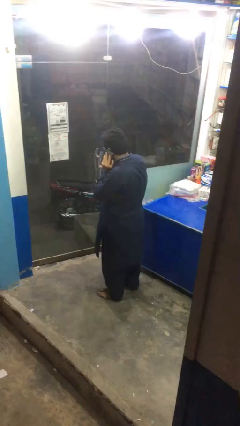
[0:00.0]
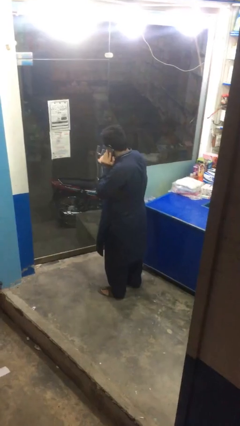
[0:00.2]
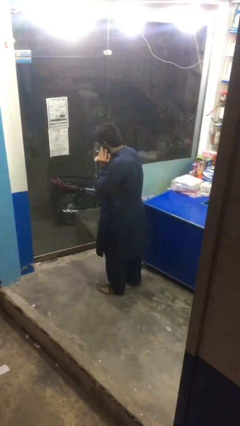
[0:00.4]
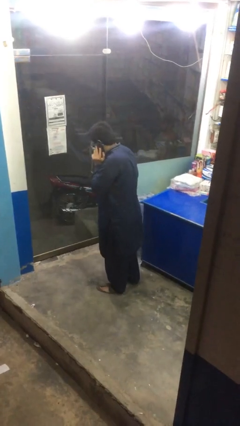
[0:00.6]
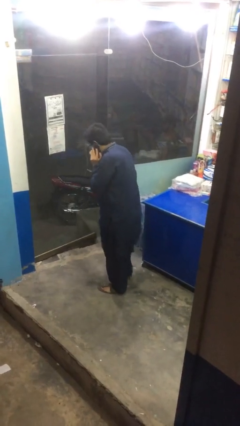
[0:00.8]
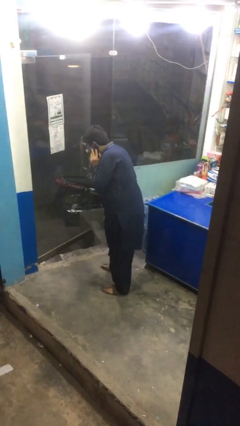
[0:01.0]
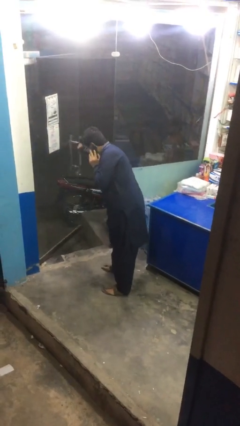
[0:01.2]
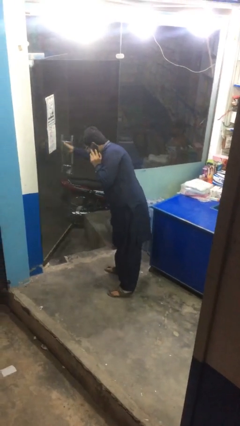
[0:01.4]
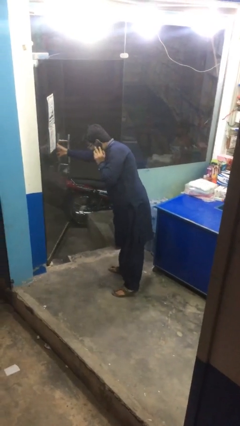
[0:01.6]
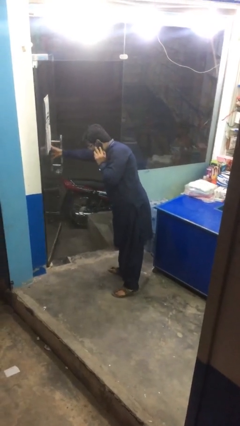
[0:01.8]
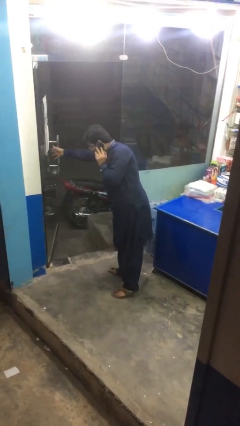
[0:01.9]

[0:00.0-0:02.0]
person opens facility door

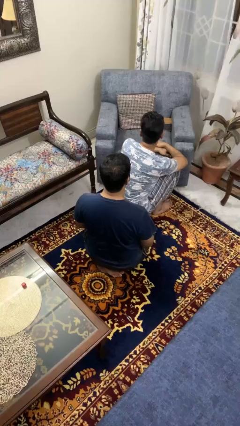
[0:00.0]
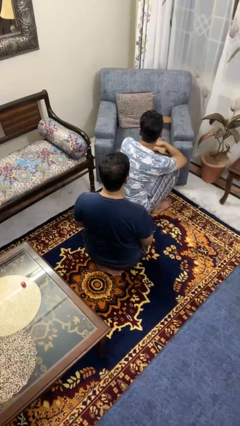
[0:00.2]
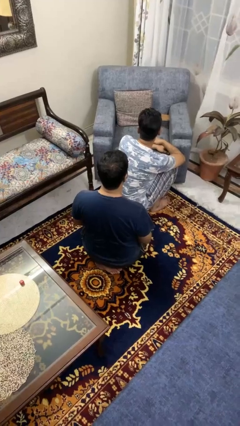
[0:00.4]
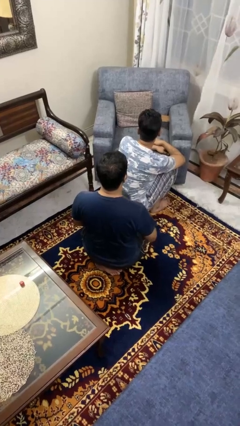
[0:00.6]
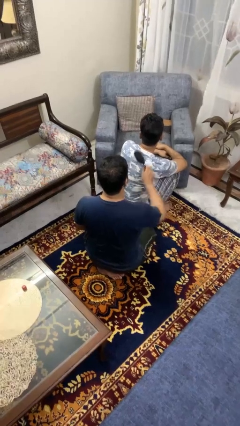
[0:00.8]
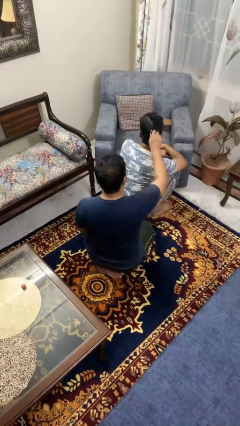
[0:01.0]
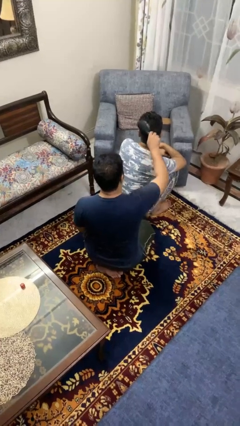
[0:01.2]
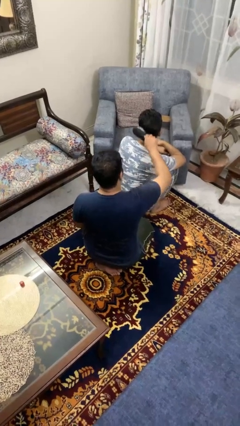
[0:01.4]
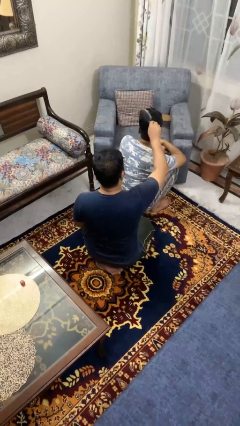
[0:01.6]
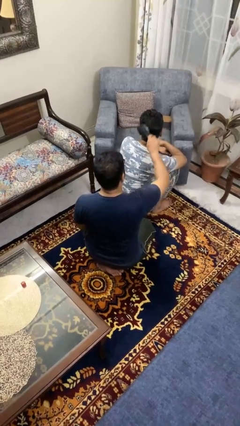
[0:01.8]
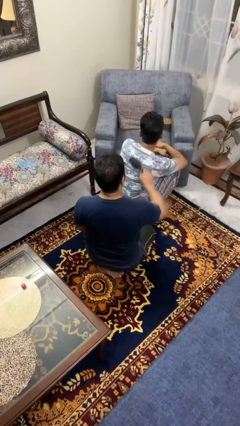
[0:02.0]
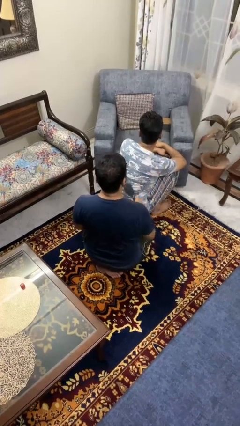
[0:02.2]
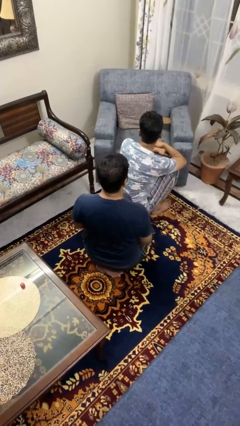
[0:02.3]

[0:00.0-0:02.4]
person brushes hair of person

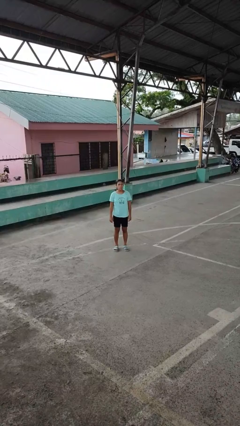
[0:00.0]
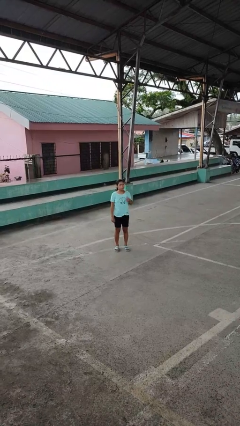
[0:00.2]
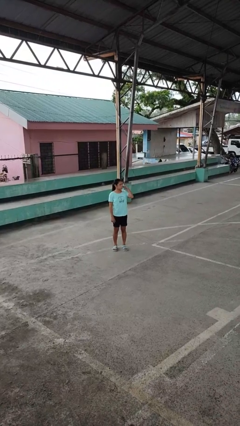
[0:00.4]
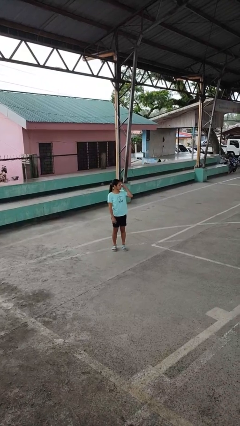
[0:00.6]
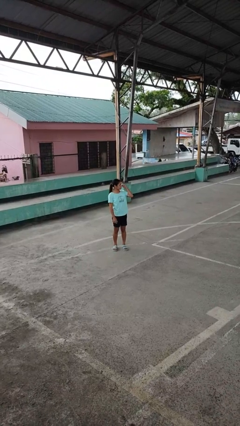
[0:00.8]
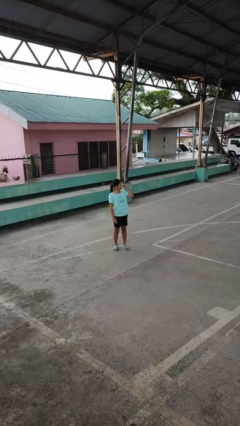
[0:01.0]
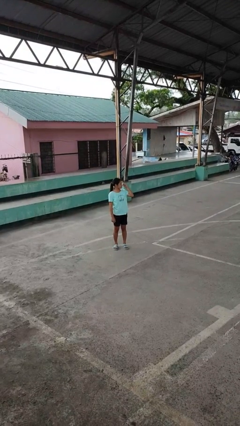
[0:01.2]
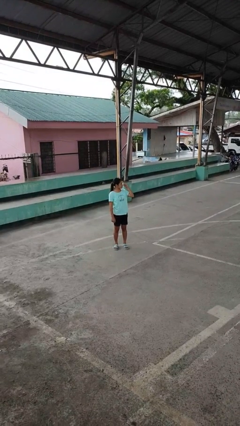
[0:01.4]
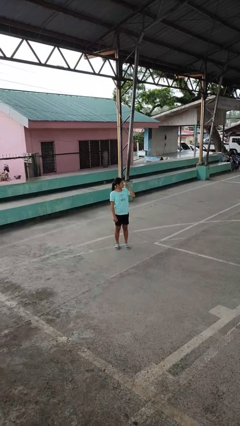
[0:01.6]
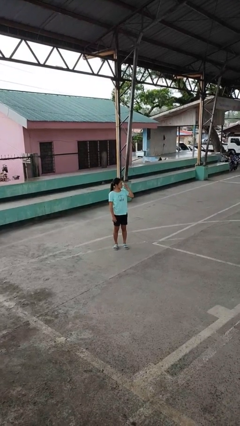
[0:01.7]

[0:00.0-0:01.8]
person gestures behind me

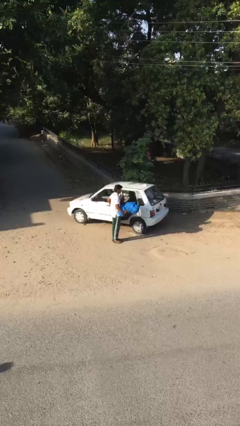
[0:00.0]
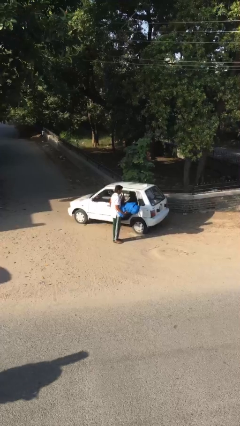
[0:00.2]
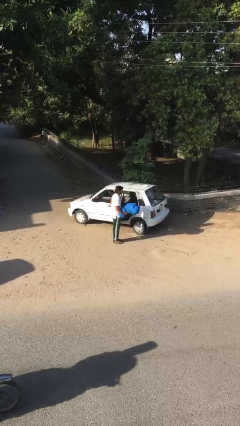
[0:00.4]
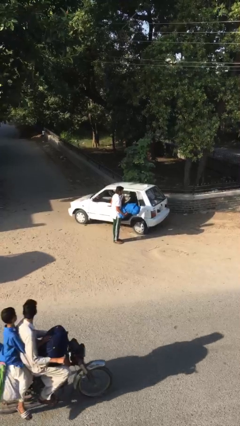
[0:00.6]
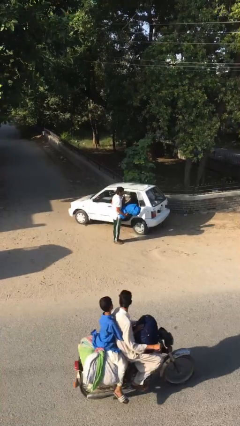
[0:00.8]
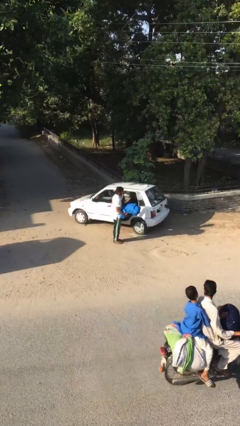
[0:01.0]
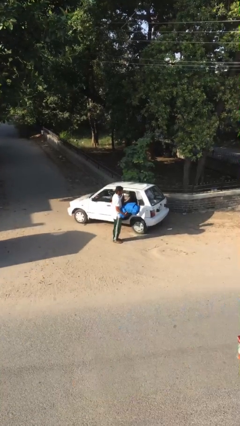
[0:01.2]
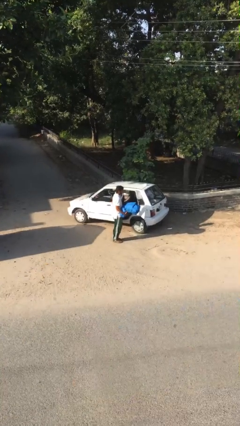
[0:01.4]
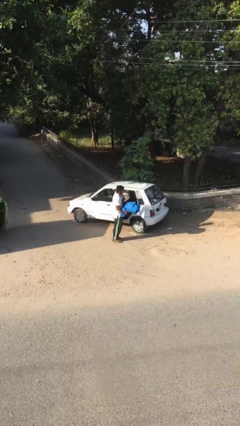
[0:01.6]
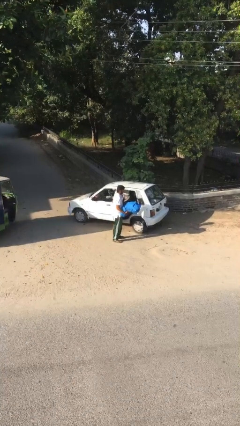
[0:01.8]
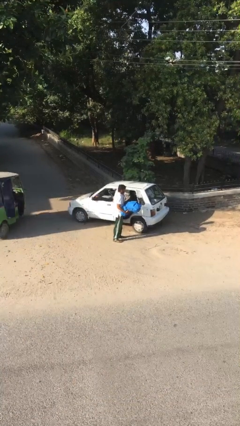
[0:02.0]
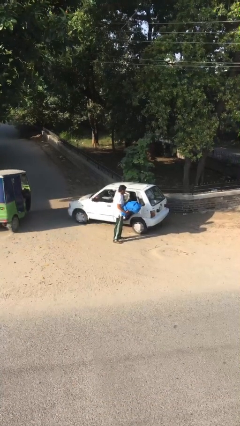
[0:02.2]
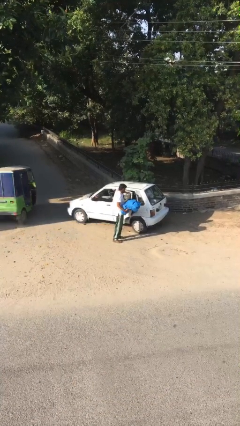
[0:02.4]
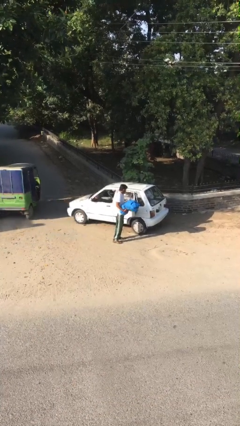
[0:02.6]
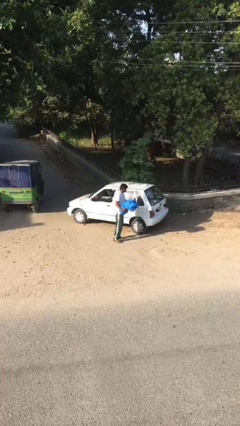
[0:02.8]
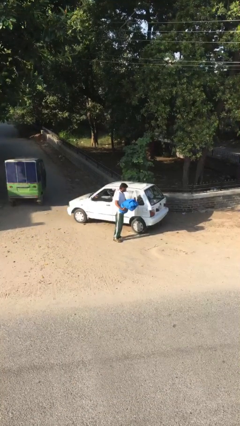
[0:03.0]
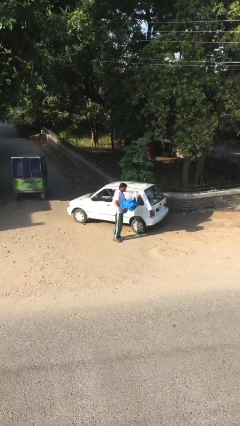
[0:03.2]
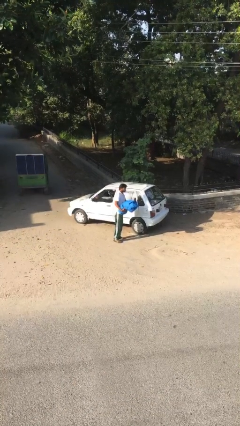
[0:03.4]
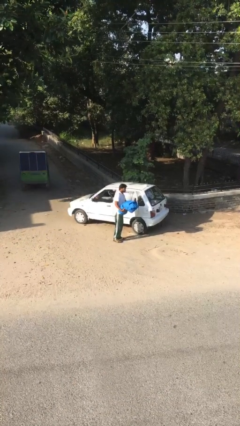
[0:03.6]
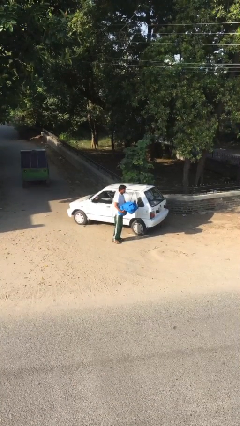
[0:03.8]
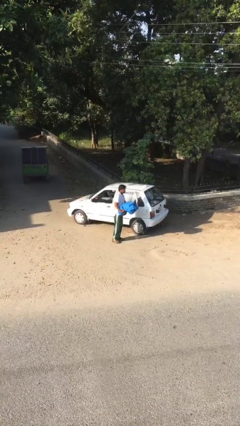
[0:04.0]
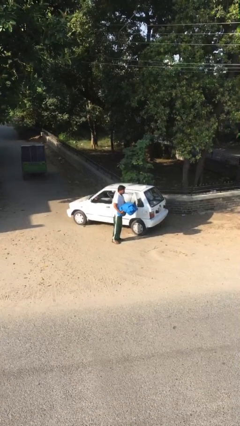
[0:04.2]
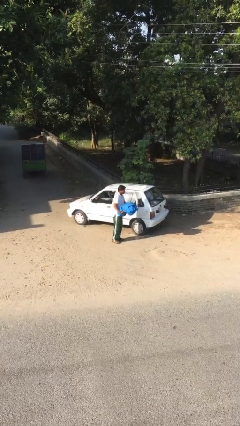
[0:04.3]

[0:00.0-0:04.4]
person closes car door

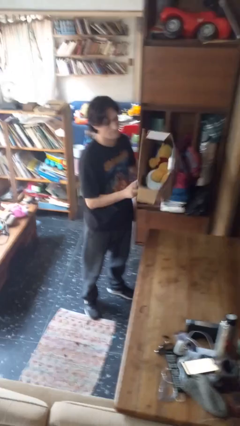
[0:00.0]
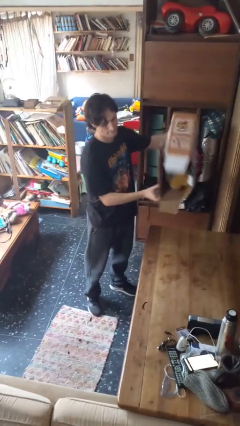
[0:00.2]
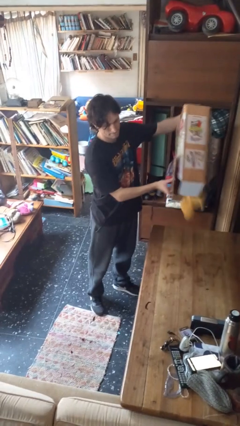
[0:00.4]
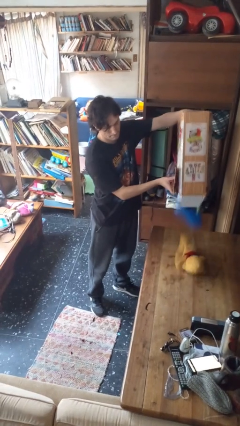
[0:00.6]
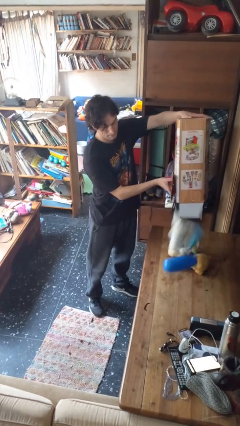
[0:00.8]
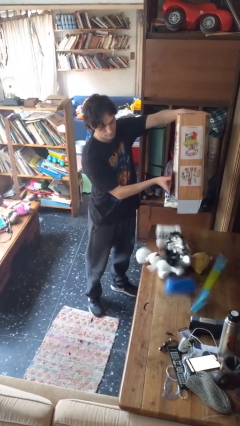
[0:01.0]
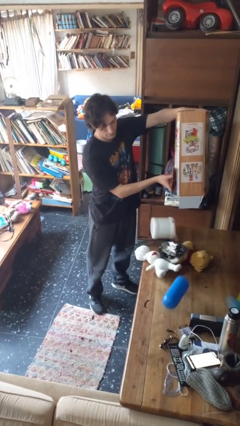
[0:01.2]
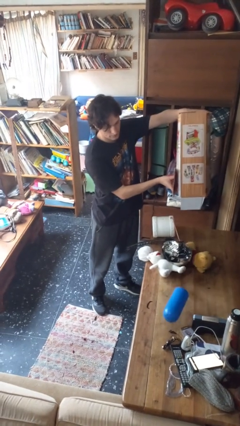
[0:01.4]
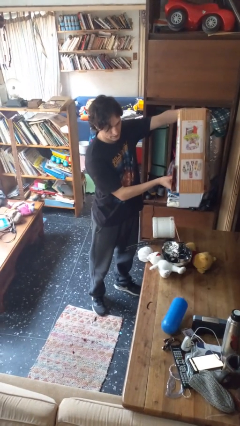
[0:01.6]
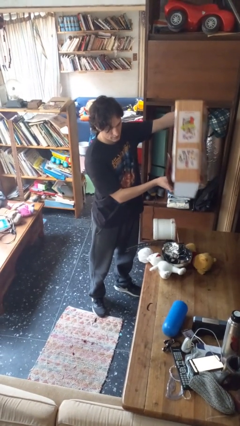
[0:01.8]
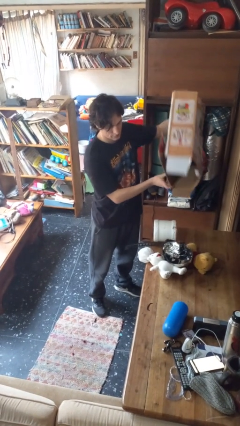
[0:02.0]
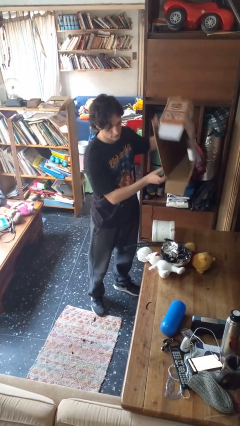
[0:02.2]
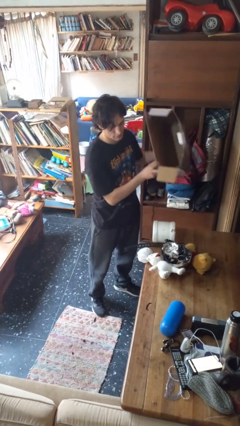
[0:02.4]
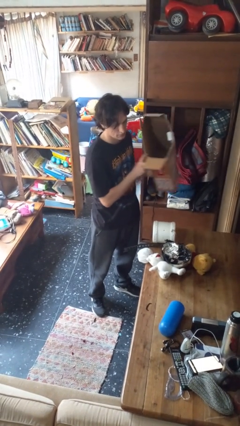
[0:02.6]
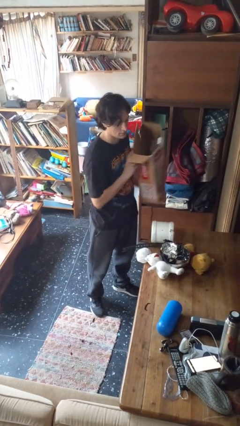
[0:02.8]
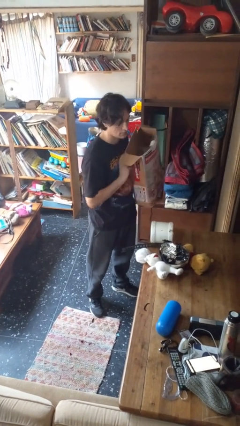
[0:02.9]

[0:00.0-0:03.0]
person unloads box onto table

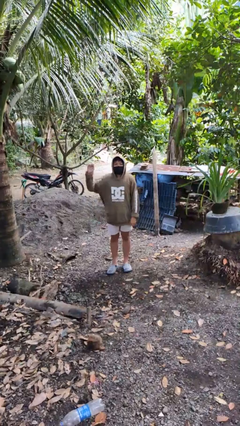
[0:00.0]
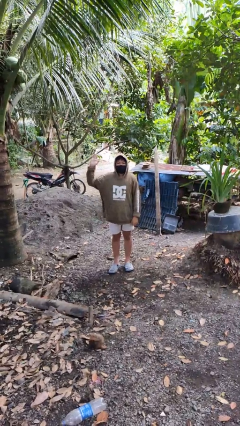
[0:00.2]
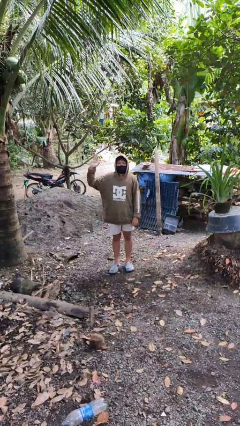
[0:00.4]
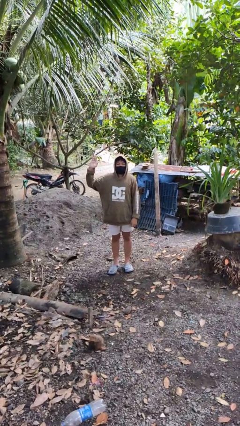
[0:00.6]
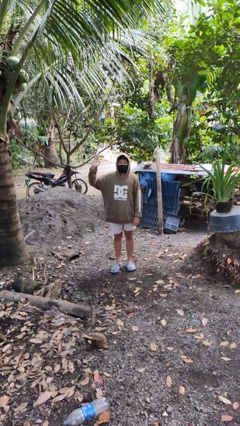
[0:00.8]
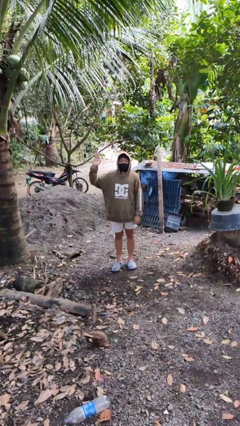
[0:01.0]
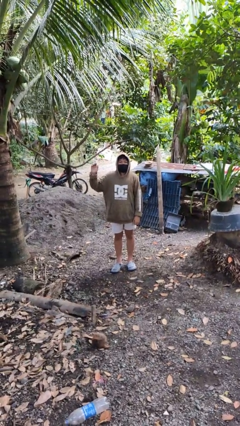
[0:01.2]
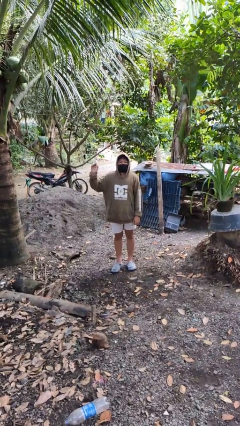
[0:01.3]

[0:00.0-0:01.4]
person gestures number five

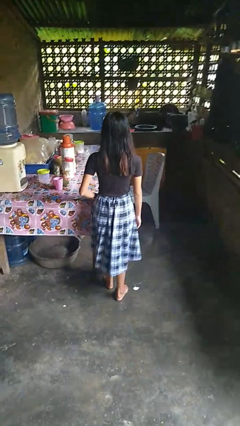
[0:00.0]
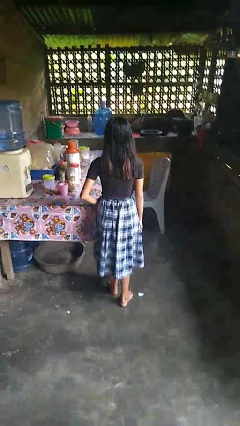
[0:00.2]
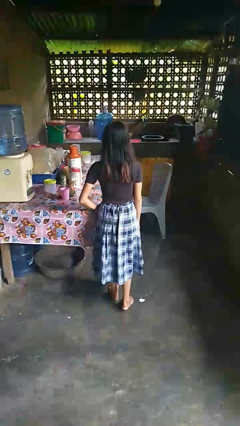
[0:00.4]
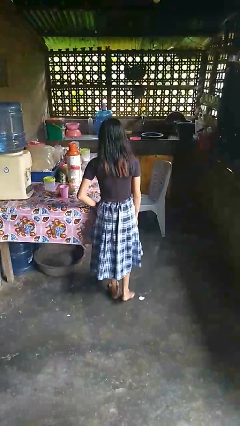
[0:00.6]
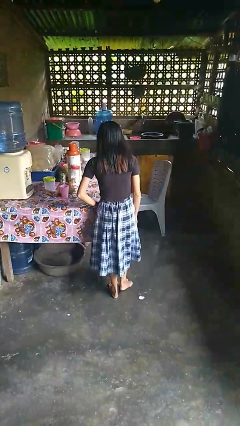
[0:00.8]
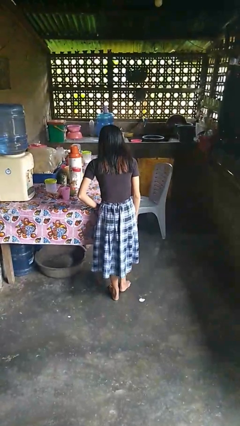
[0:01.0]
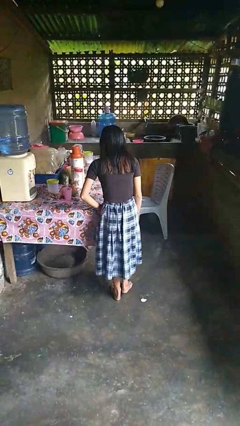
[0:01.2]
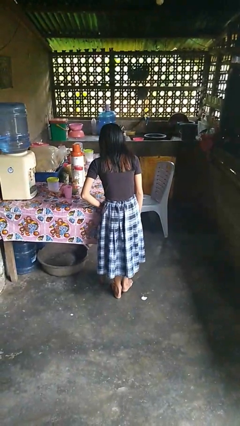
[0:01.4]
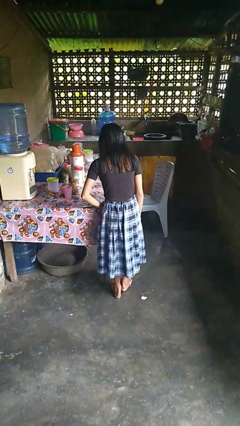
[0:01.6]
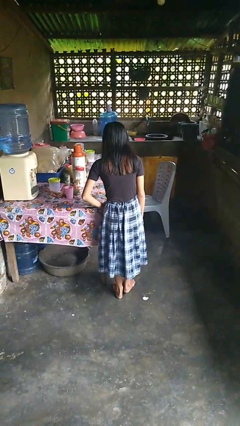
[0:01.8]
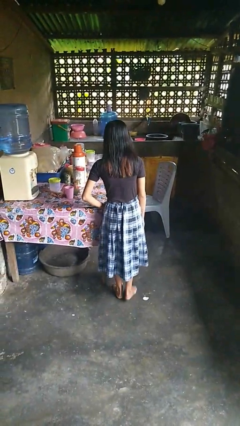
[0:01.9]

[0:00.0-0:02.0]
person bumps into table

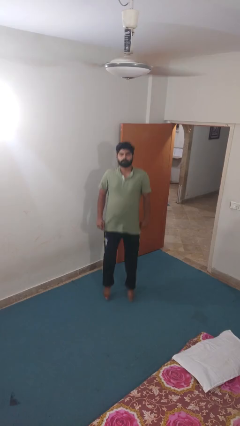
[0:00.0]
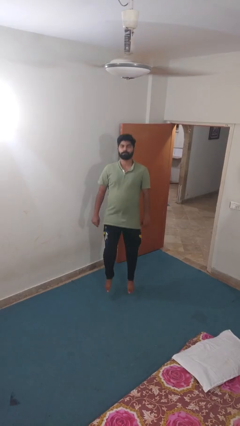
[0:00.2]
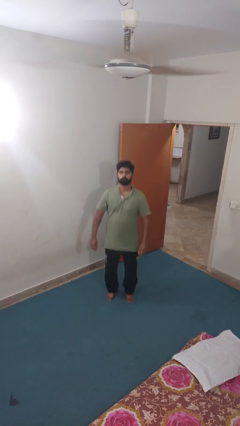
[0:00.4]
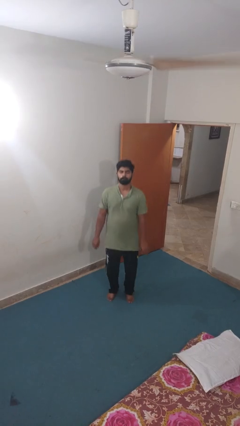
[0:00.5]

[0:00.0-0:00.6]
person jumps
